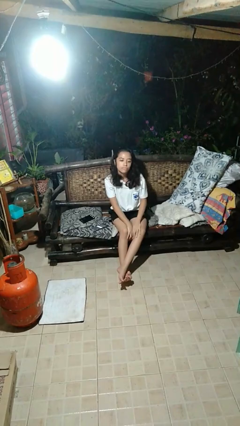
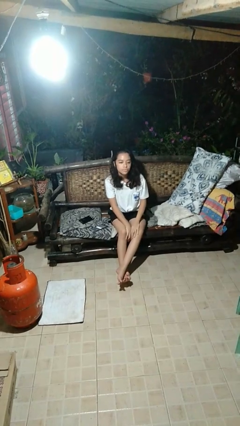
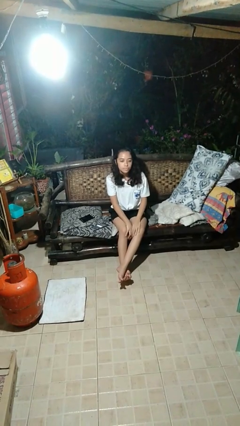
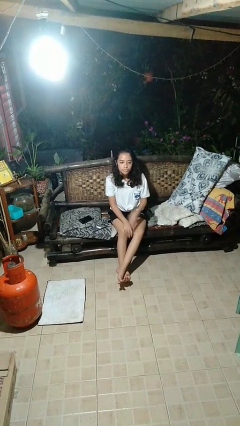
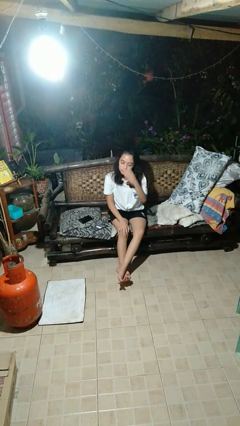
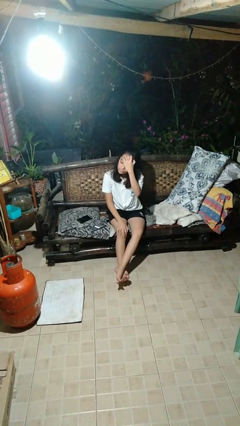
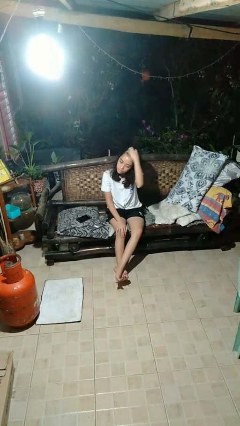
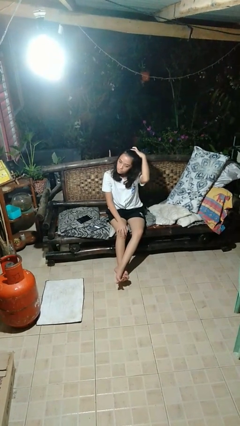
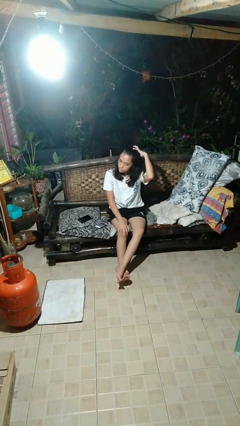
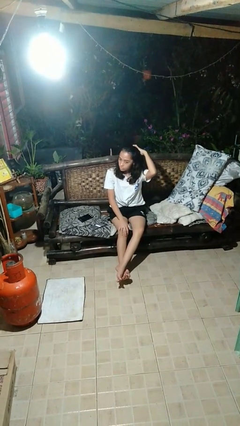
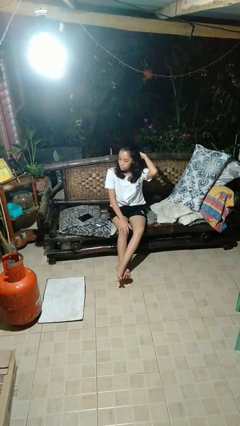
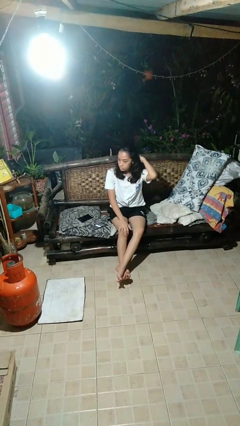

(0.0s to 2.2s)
person strokes hair

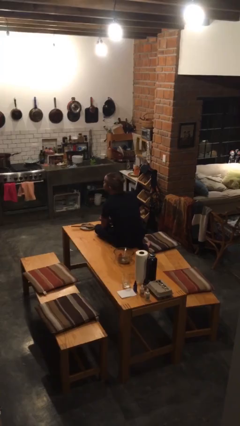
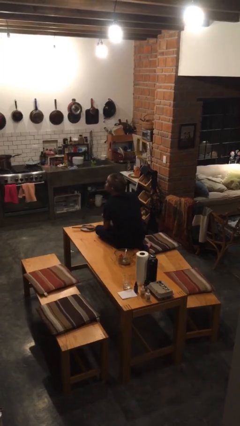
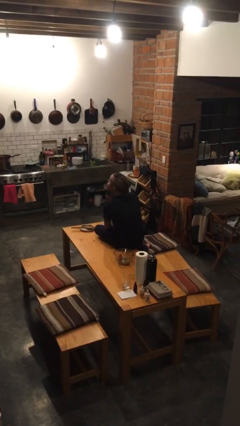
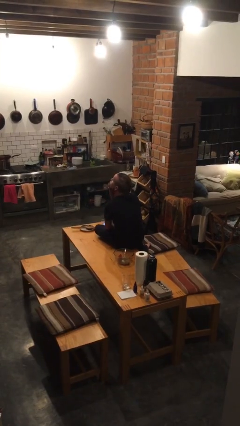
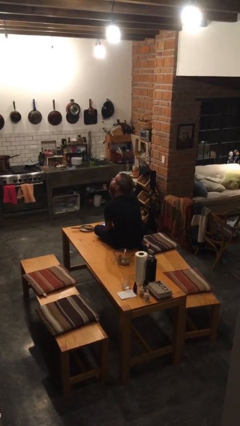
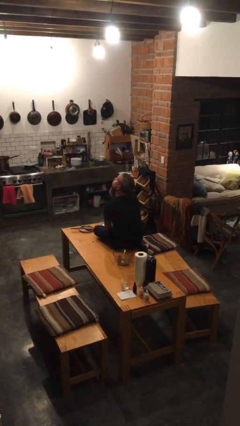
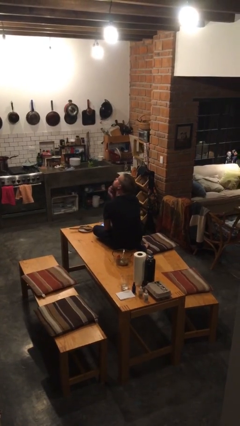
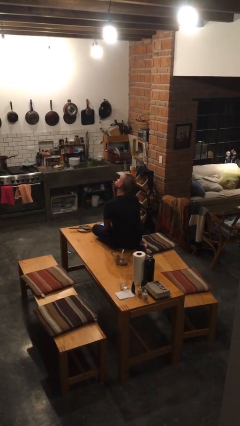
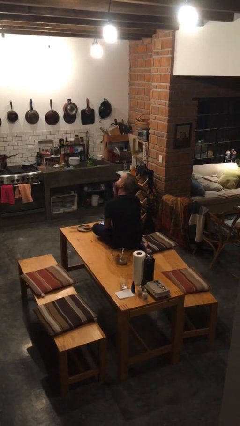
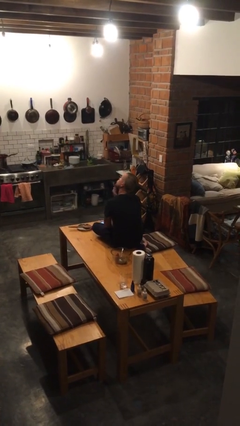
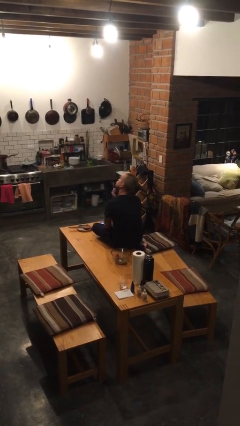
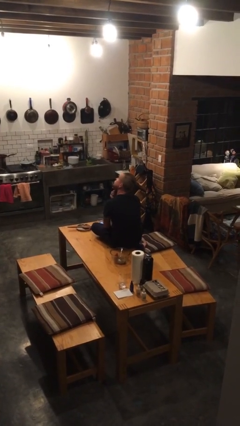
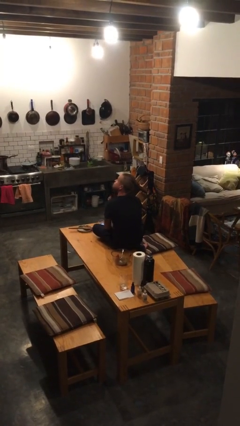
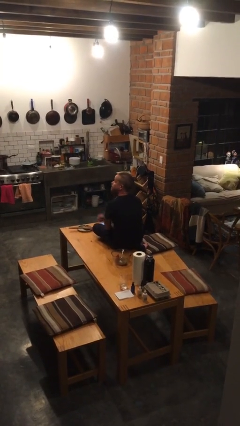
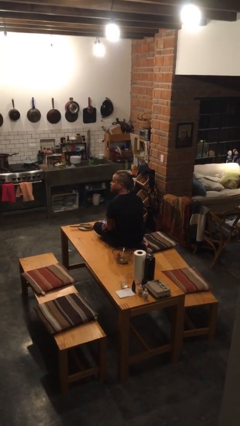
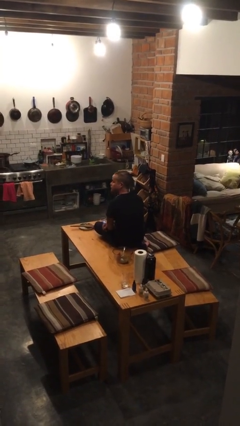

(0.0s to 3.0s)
person strokes chin

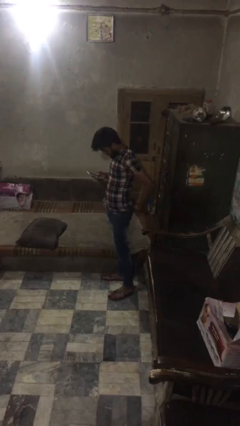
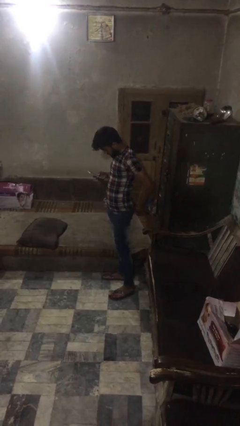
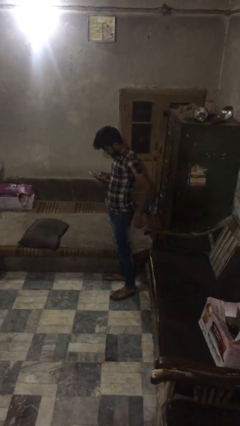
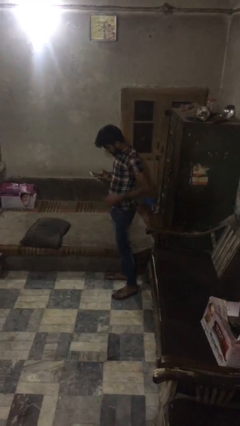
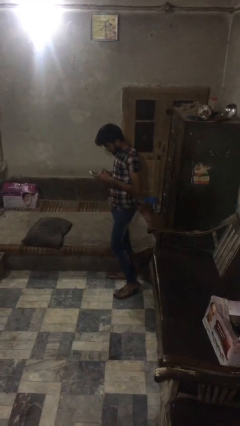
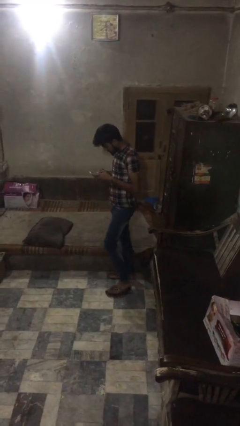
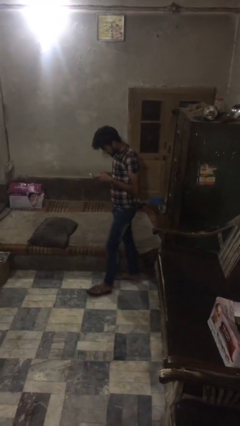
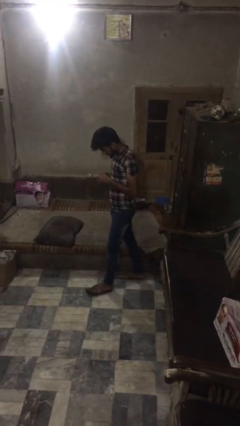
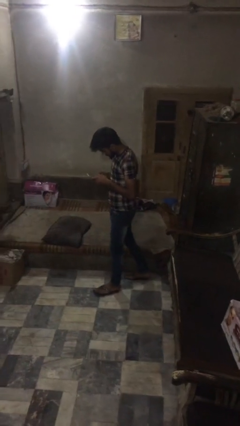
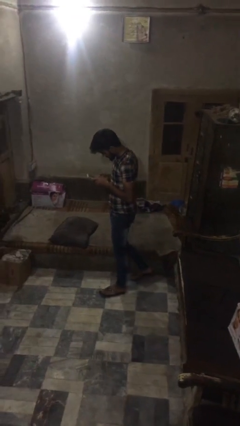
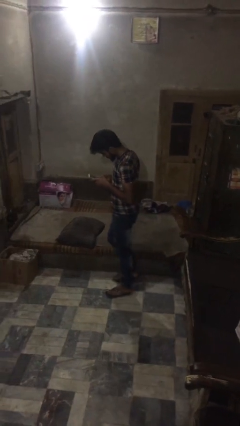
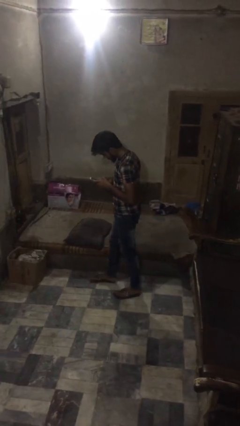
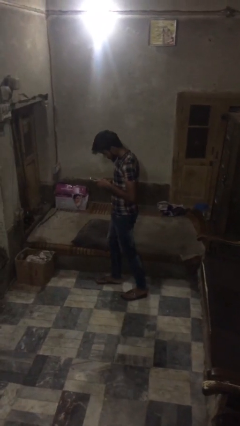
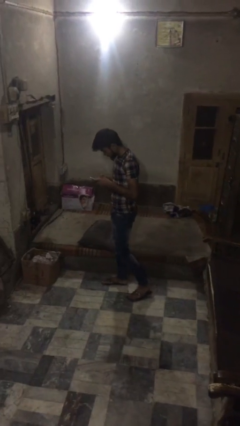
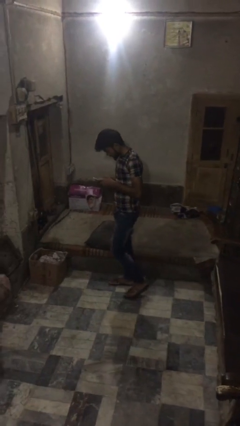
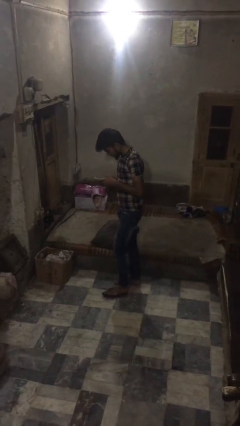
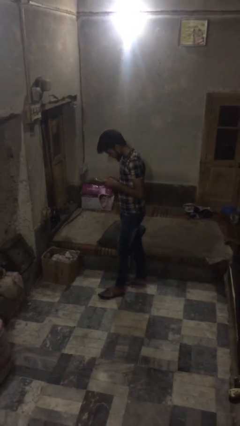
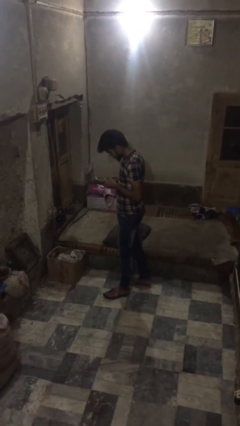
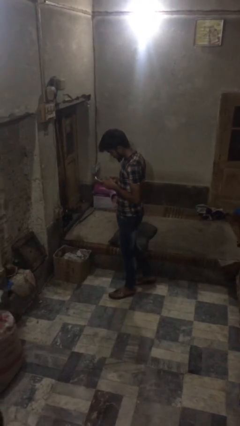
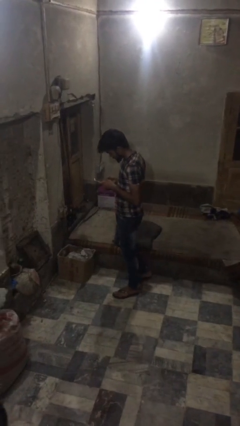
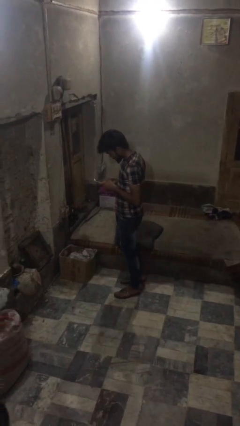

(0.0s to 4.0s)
person texts on phone

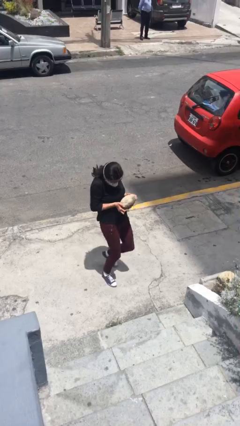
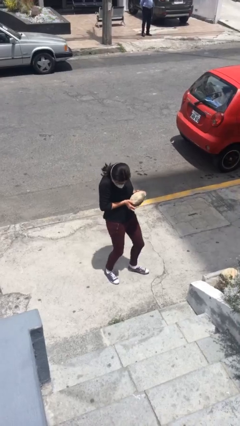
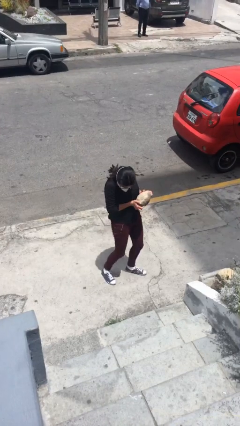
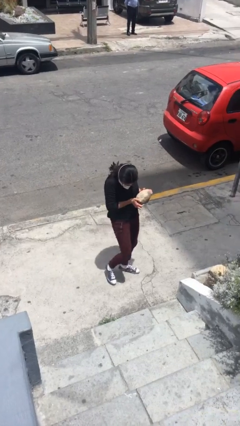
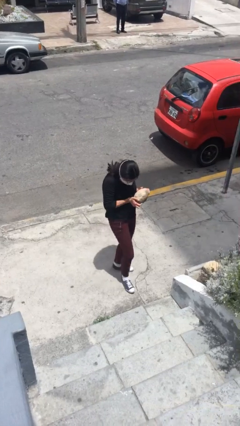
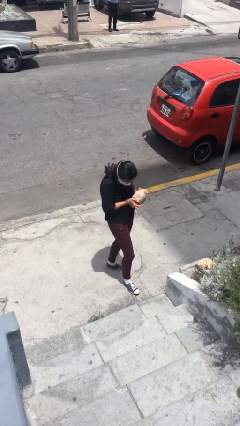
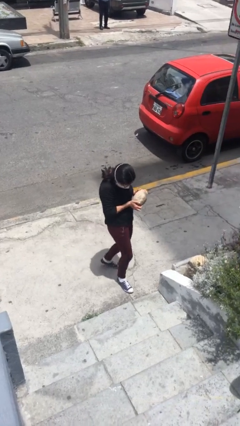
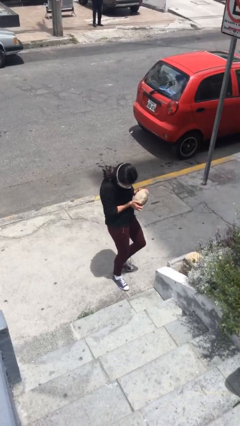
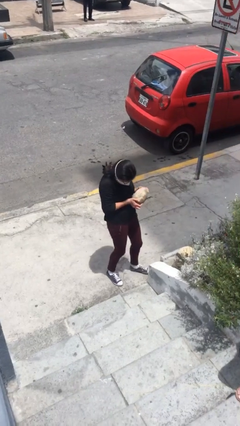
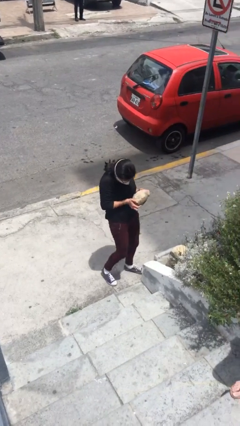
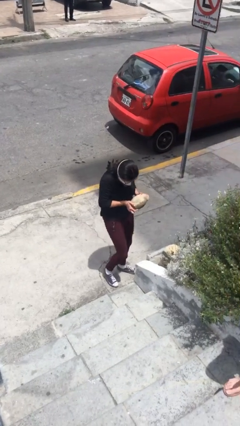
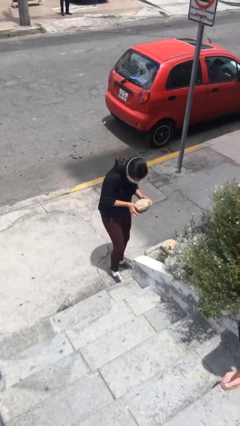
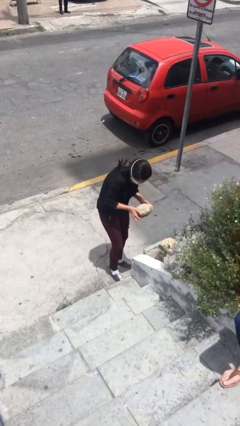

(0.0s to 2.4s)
person carries heavy object

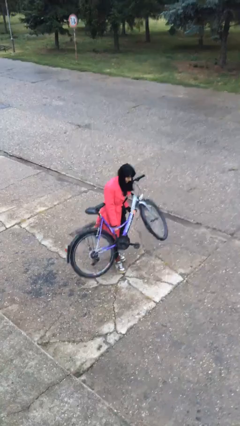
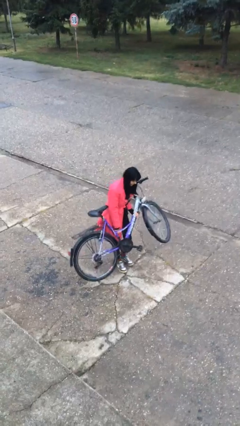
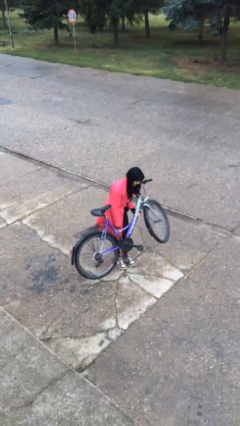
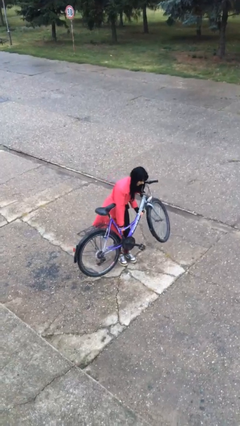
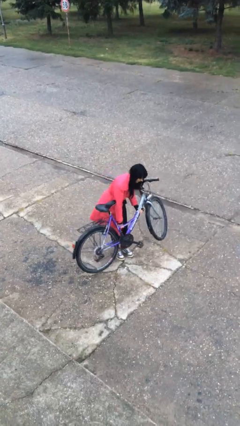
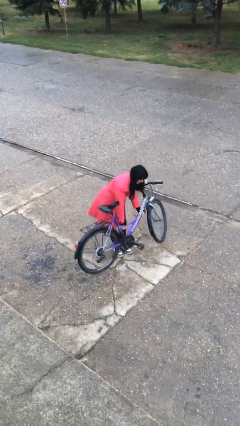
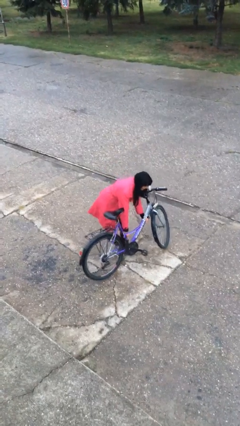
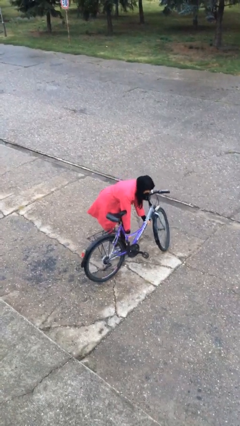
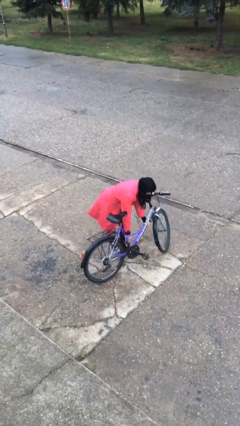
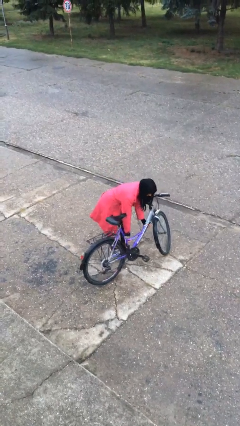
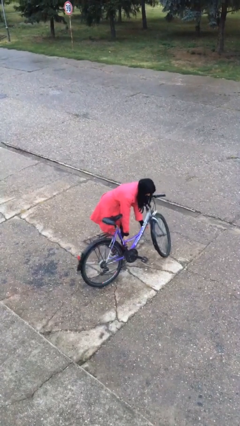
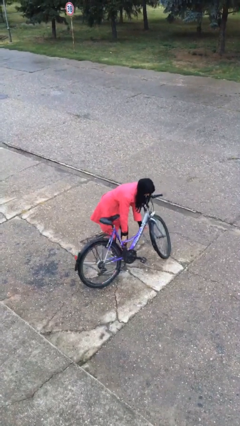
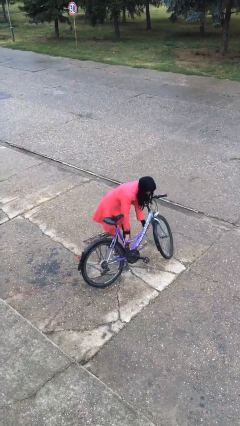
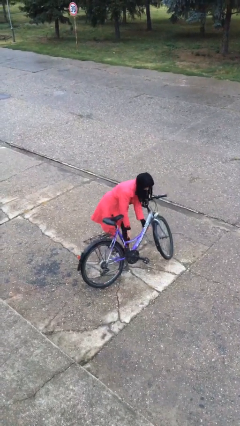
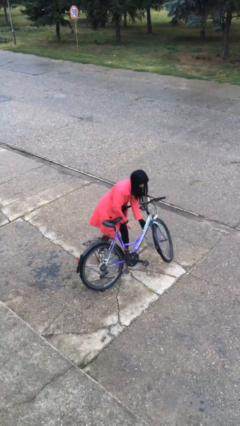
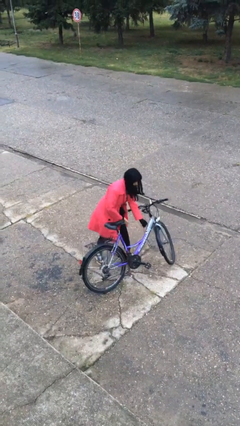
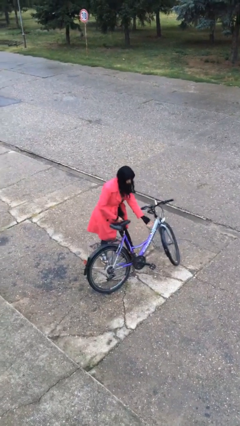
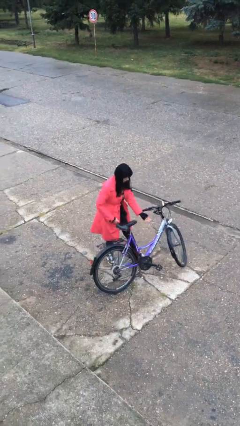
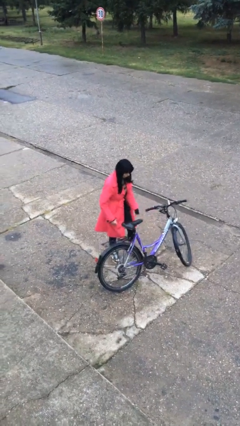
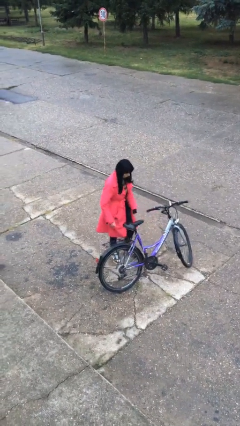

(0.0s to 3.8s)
person puts down object on floor

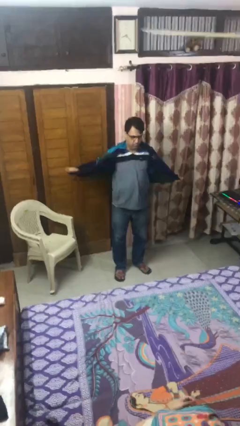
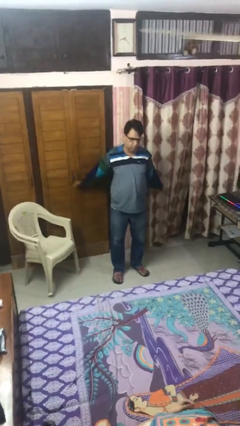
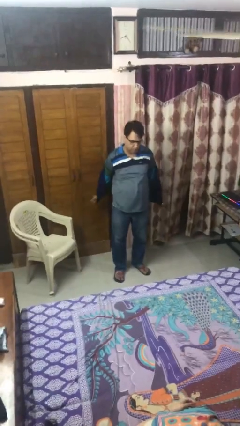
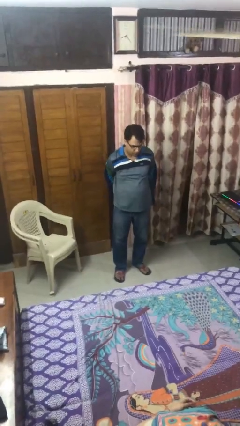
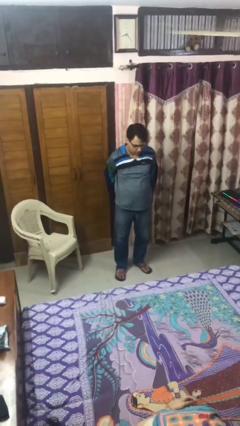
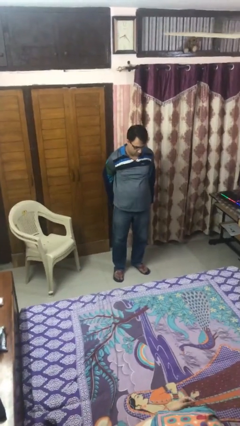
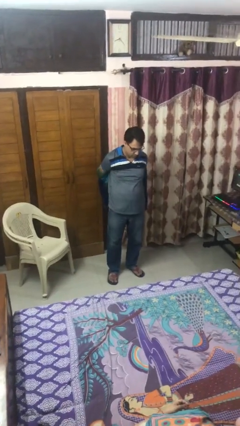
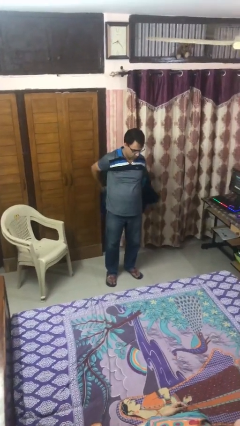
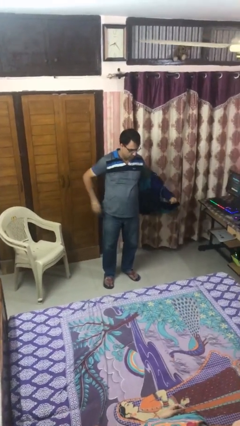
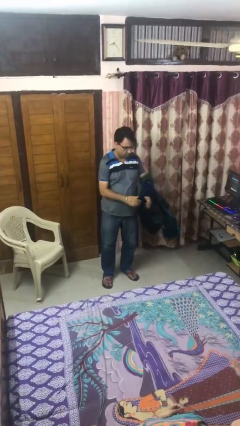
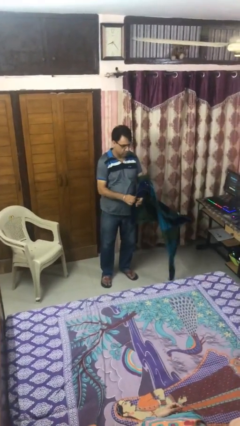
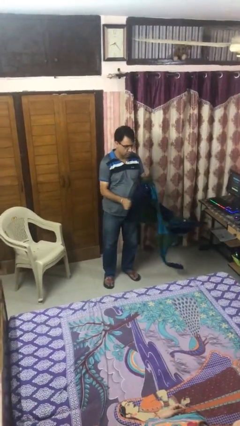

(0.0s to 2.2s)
person takes off jacket
